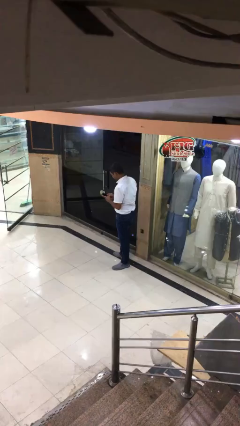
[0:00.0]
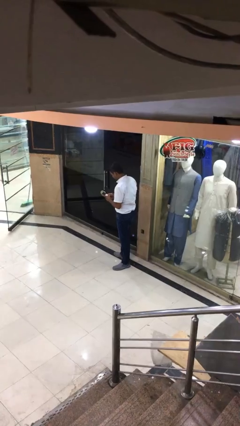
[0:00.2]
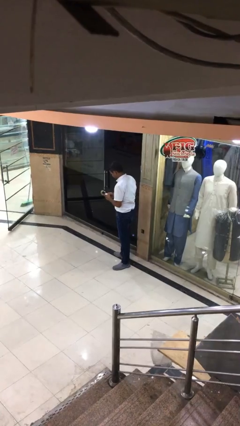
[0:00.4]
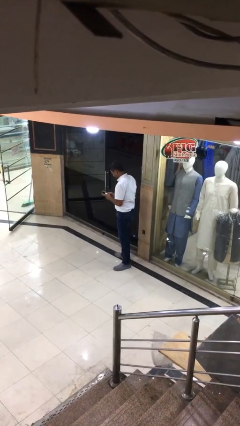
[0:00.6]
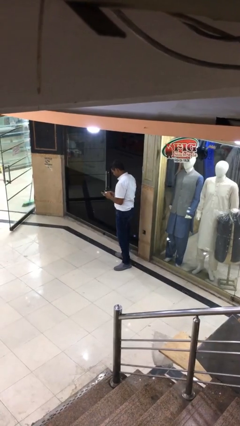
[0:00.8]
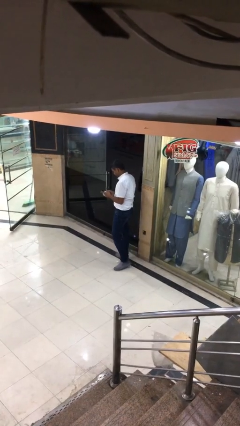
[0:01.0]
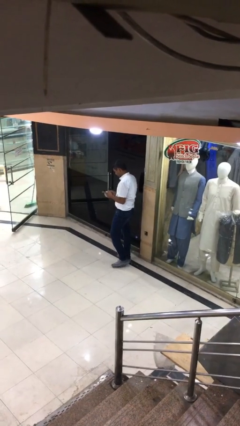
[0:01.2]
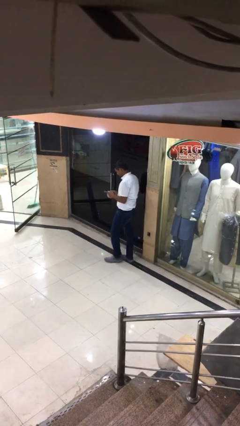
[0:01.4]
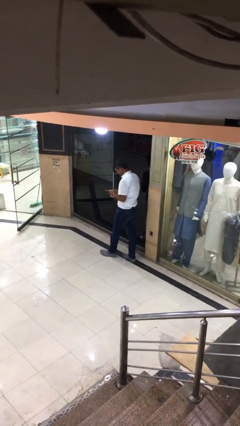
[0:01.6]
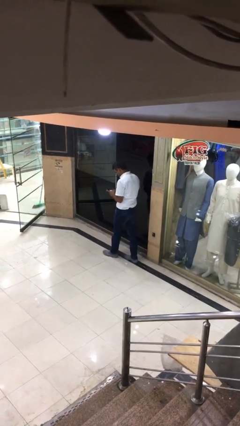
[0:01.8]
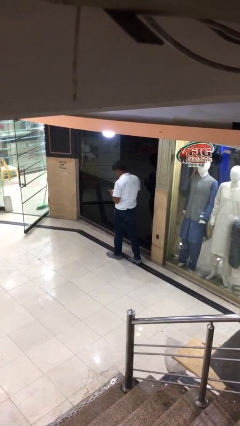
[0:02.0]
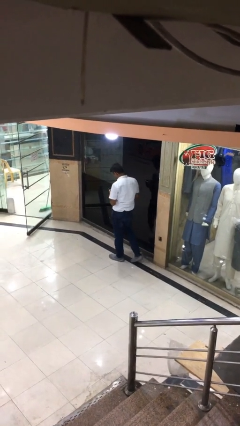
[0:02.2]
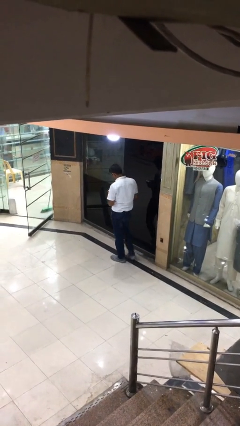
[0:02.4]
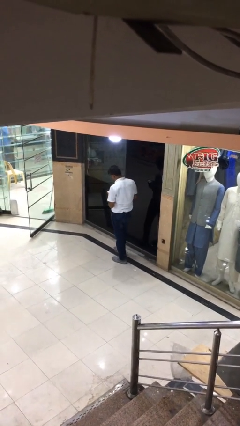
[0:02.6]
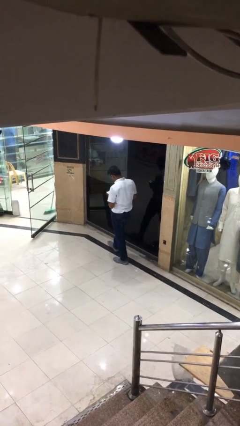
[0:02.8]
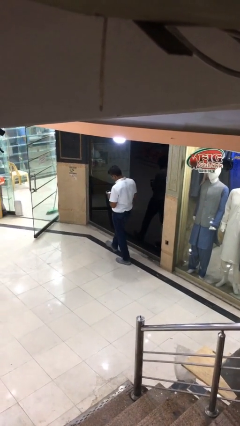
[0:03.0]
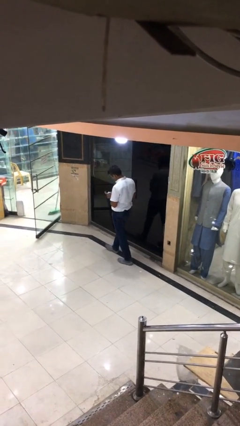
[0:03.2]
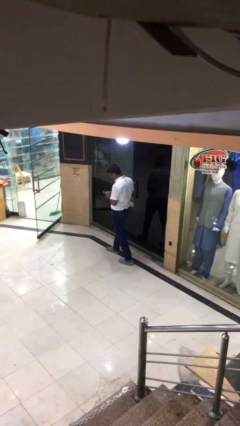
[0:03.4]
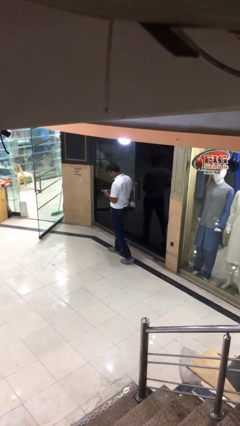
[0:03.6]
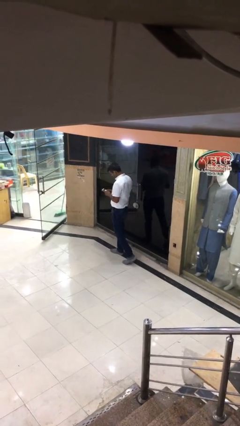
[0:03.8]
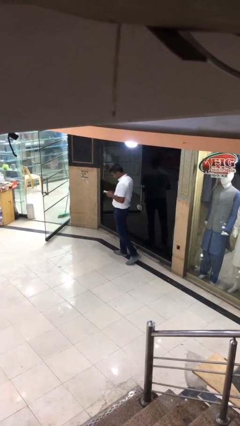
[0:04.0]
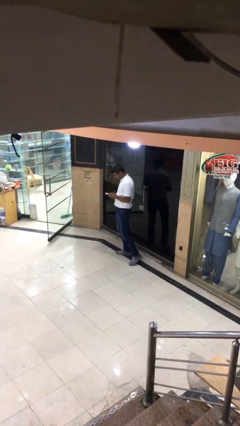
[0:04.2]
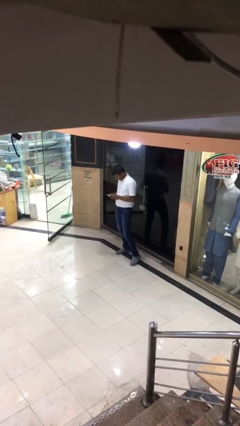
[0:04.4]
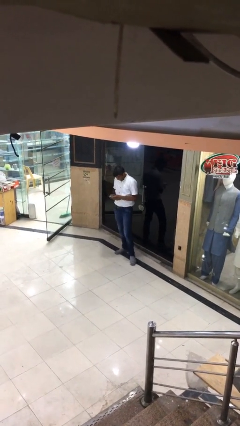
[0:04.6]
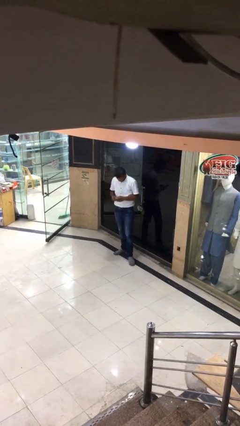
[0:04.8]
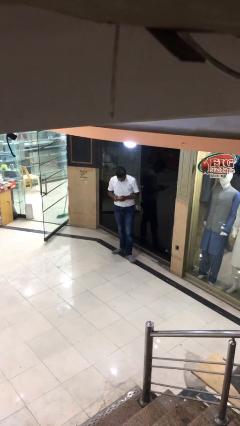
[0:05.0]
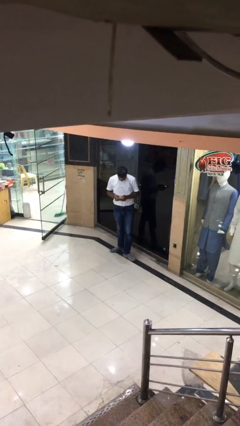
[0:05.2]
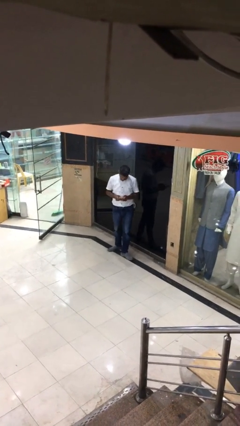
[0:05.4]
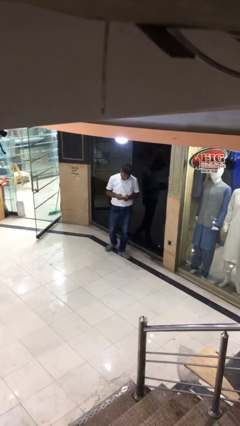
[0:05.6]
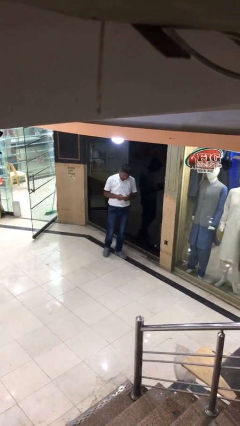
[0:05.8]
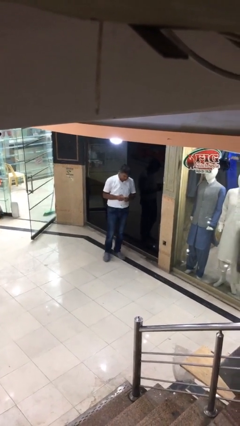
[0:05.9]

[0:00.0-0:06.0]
person texts on phone

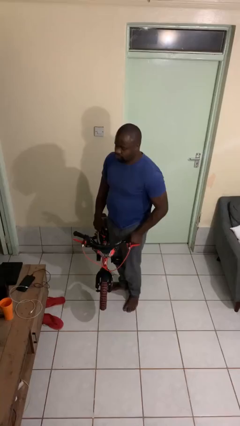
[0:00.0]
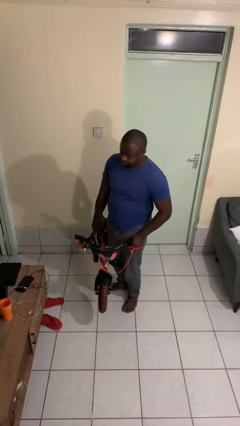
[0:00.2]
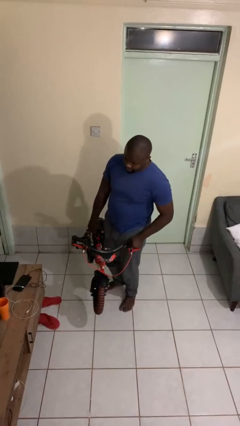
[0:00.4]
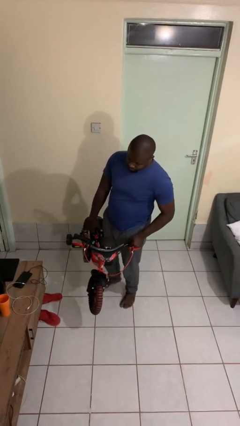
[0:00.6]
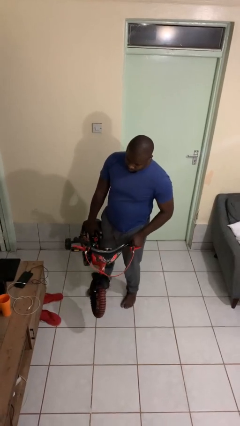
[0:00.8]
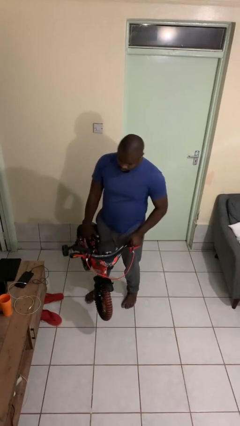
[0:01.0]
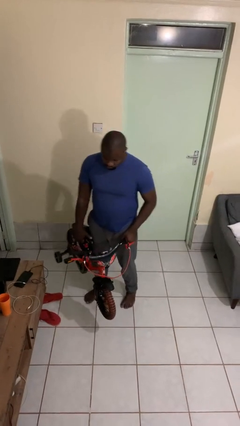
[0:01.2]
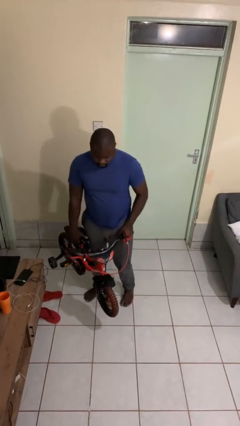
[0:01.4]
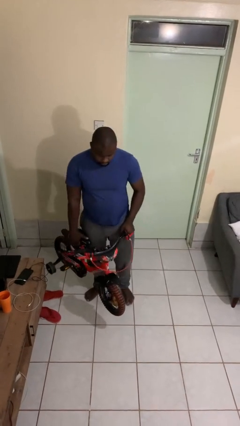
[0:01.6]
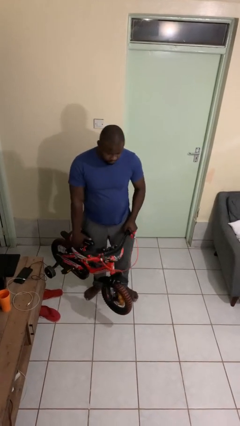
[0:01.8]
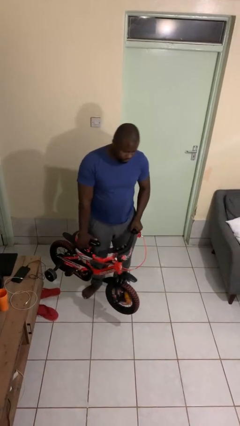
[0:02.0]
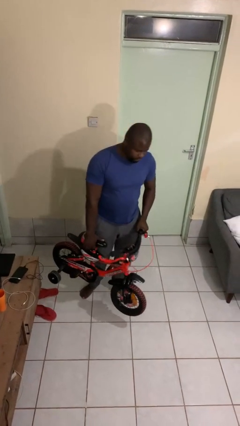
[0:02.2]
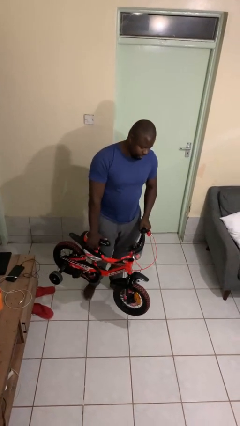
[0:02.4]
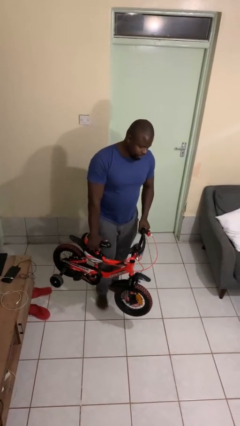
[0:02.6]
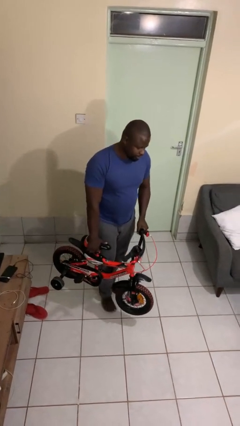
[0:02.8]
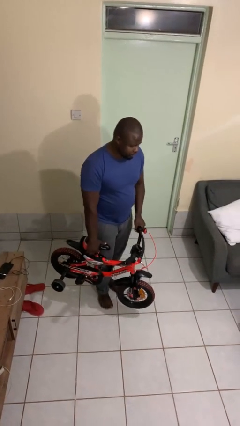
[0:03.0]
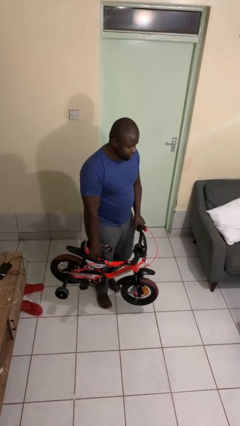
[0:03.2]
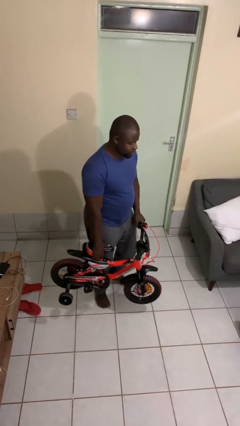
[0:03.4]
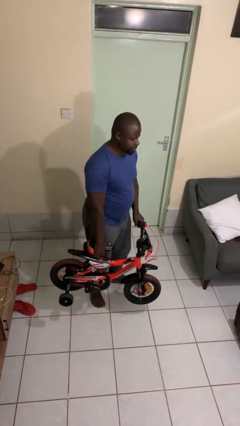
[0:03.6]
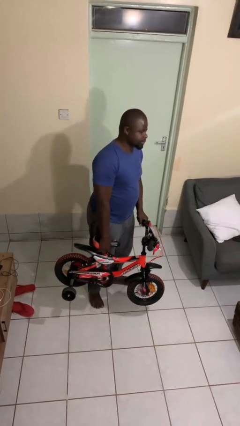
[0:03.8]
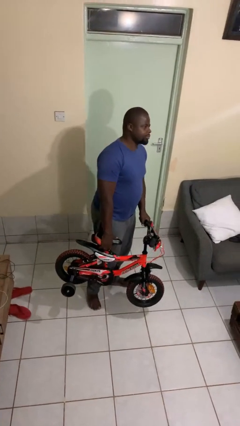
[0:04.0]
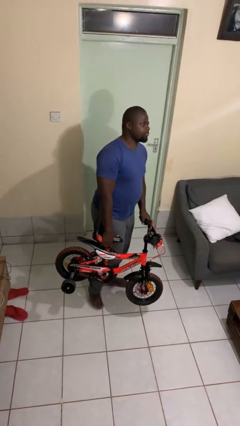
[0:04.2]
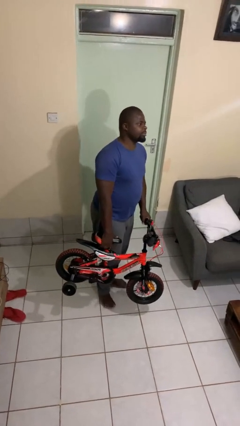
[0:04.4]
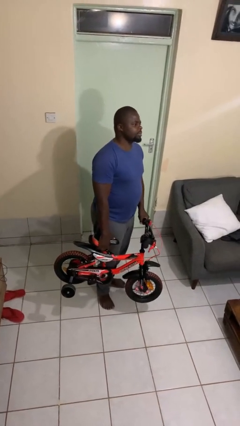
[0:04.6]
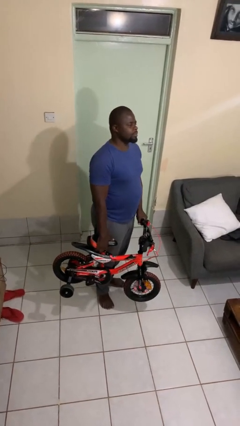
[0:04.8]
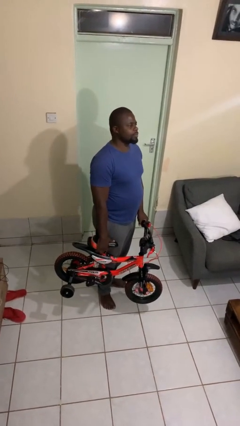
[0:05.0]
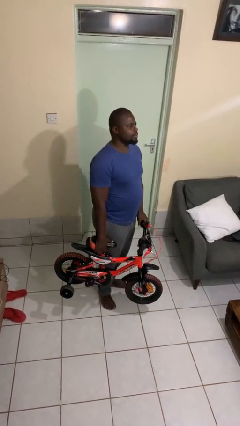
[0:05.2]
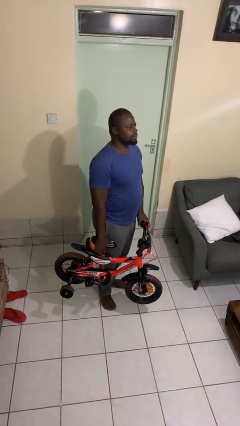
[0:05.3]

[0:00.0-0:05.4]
person carries bicycle

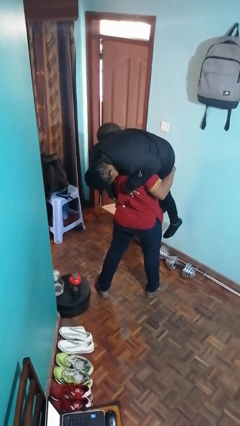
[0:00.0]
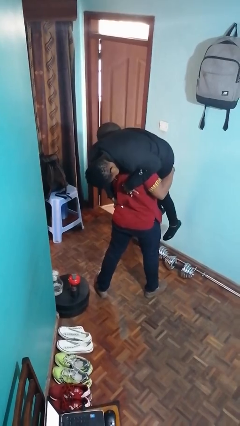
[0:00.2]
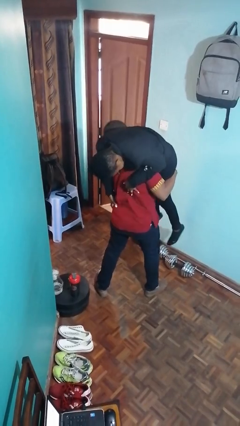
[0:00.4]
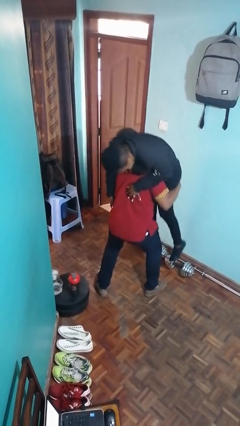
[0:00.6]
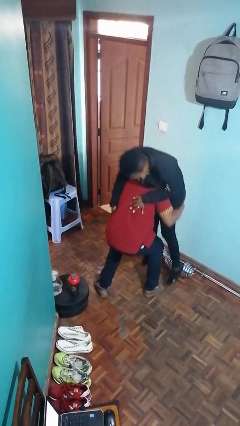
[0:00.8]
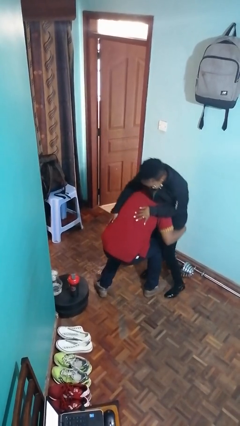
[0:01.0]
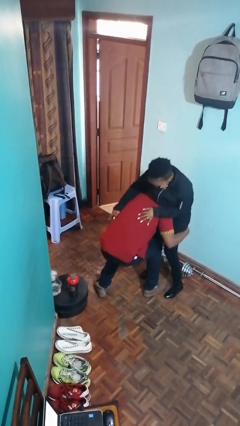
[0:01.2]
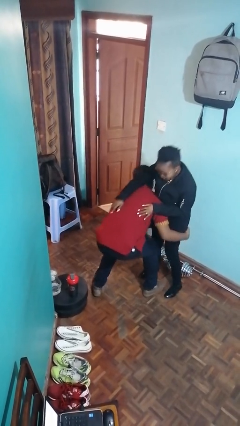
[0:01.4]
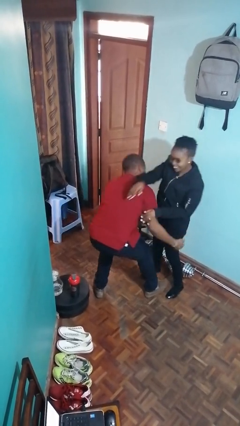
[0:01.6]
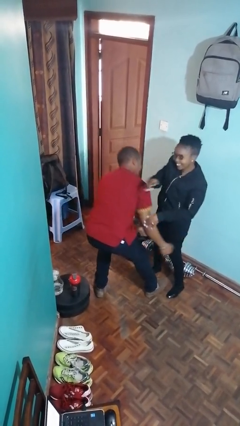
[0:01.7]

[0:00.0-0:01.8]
person puts down person

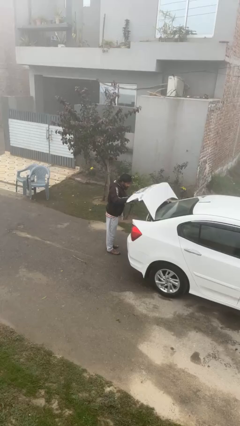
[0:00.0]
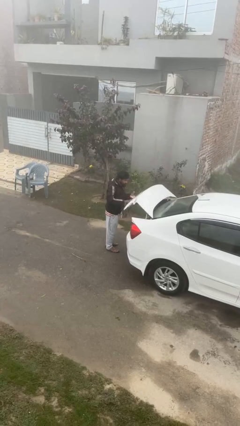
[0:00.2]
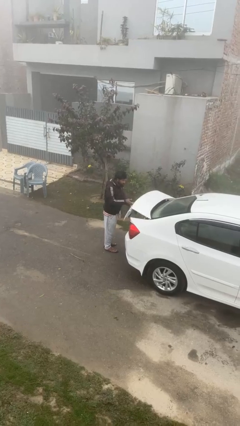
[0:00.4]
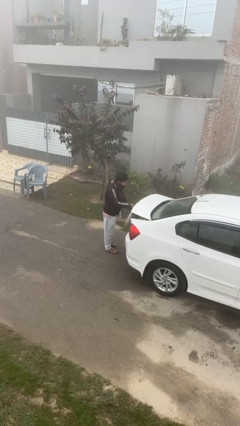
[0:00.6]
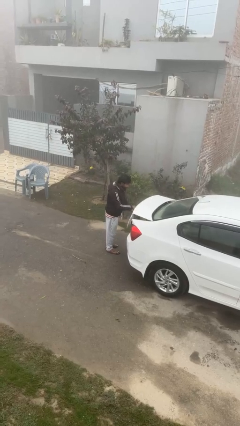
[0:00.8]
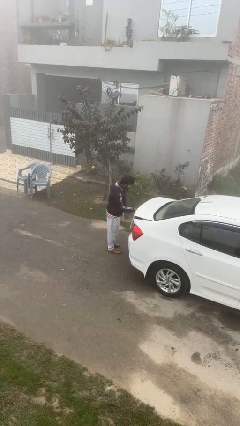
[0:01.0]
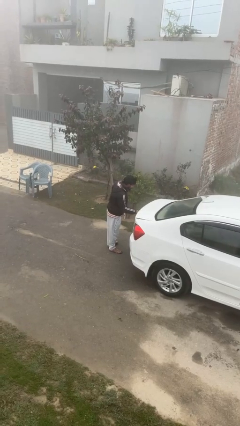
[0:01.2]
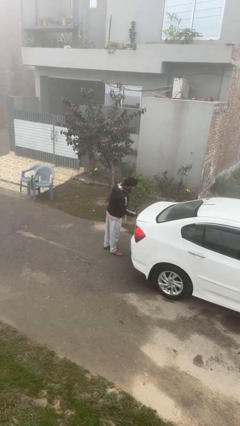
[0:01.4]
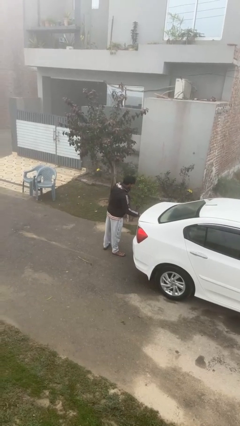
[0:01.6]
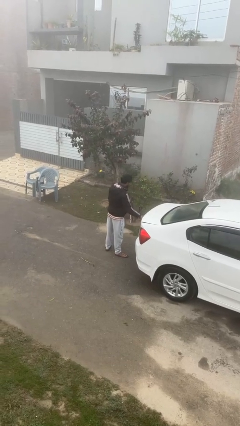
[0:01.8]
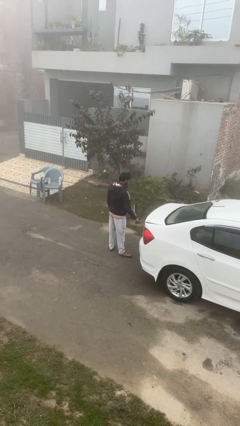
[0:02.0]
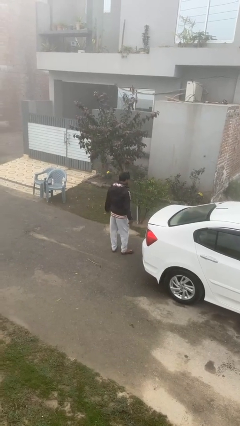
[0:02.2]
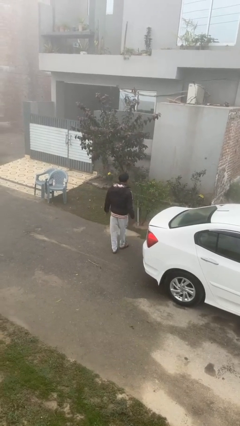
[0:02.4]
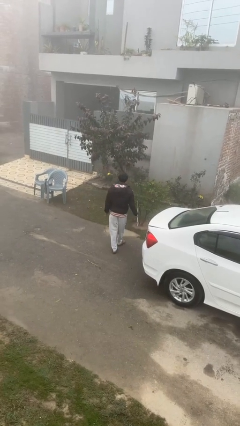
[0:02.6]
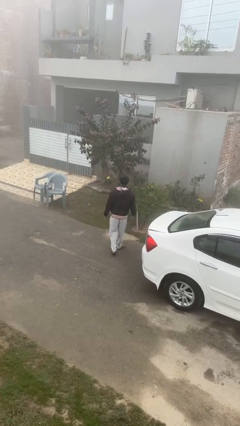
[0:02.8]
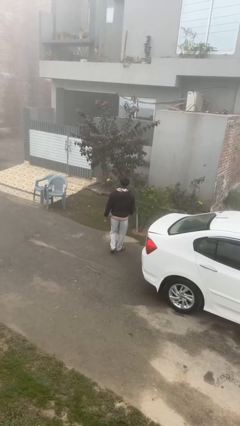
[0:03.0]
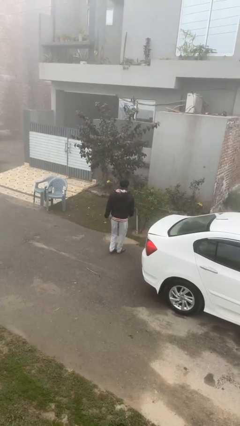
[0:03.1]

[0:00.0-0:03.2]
person closes car trunk

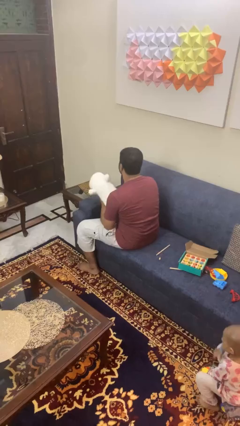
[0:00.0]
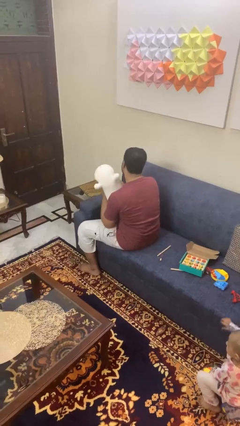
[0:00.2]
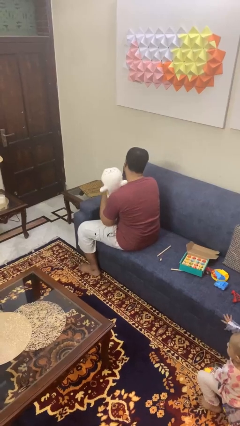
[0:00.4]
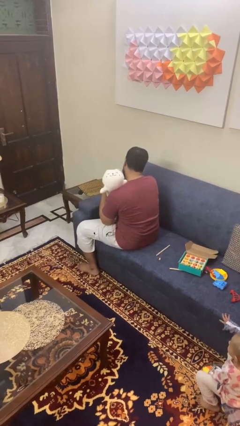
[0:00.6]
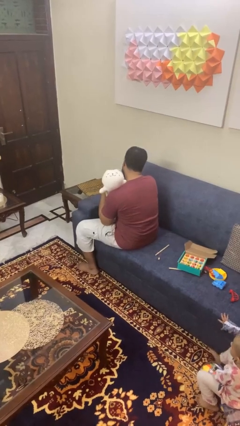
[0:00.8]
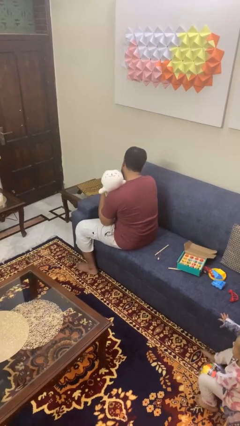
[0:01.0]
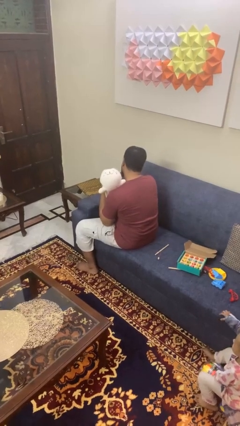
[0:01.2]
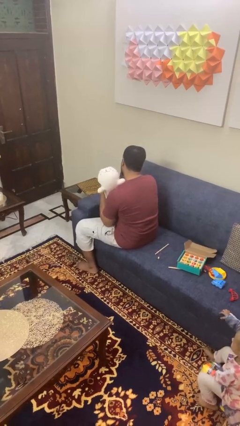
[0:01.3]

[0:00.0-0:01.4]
person hugs stuffed animal
